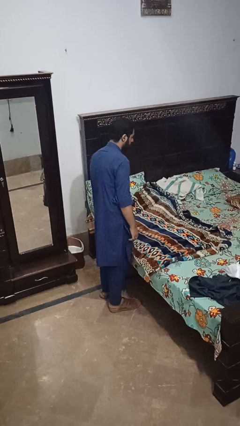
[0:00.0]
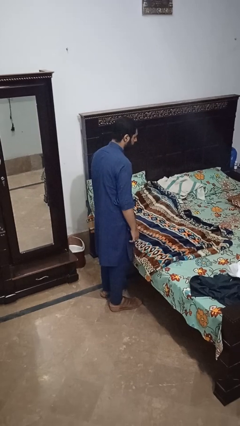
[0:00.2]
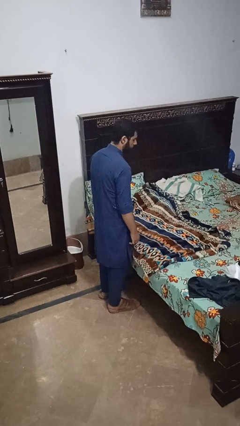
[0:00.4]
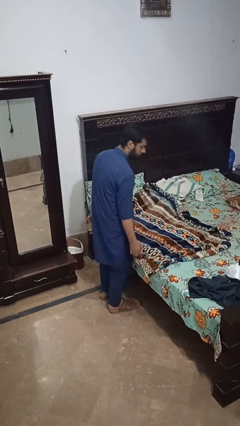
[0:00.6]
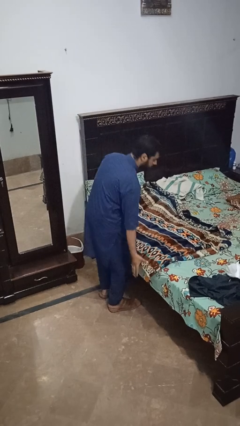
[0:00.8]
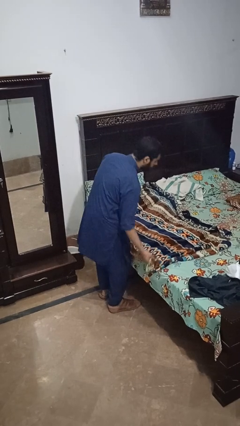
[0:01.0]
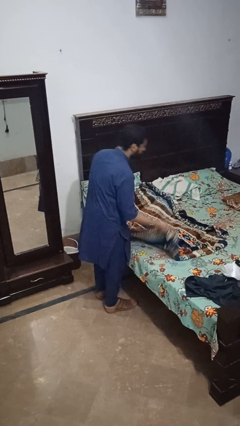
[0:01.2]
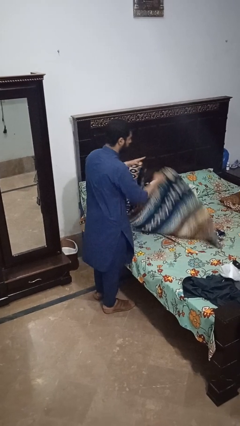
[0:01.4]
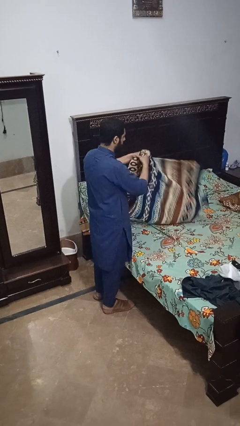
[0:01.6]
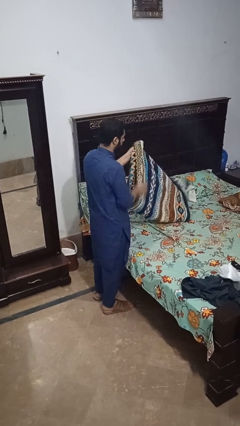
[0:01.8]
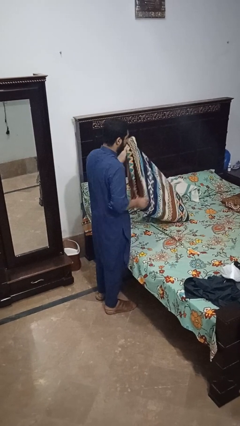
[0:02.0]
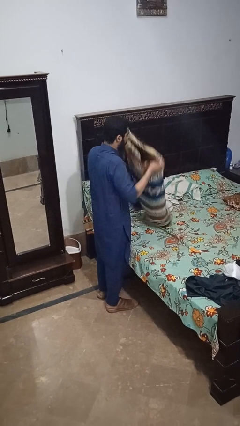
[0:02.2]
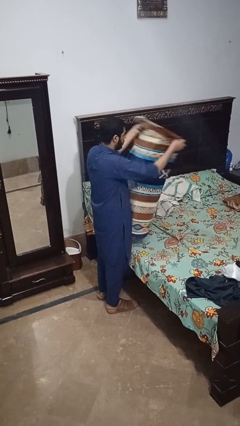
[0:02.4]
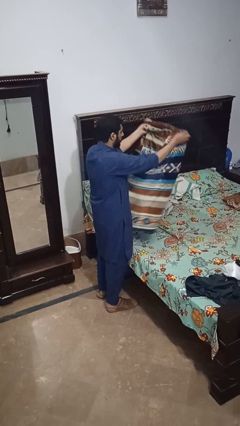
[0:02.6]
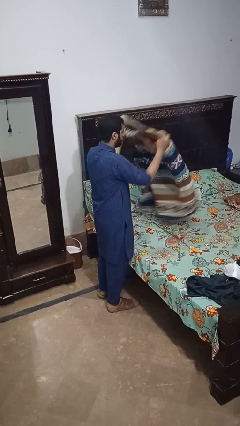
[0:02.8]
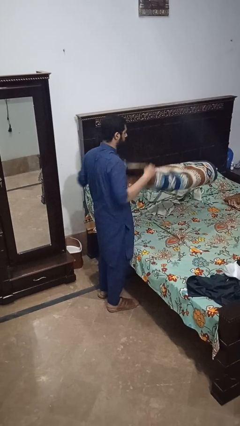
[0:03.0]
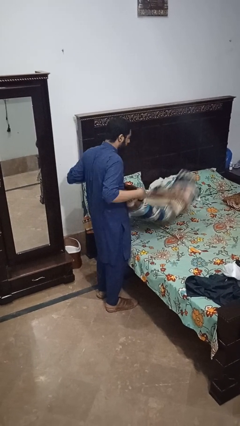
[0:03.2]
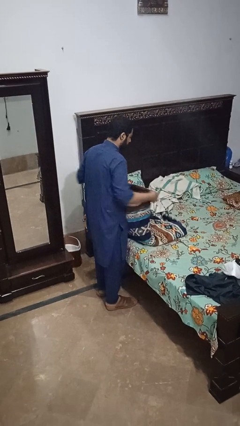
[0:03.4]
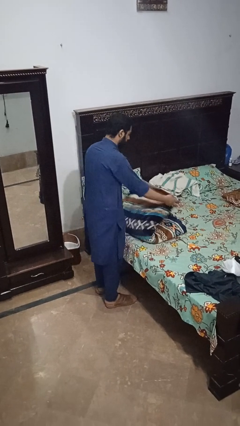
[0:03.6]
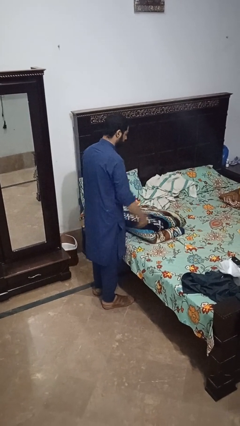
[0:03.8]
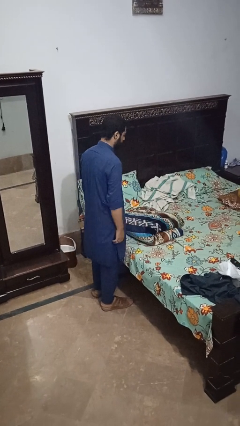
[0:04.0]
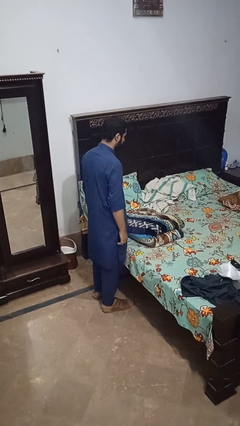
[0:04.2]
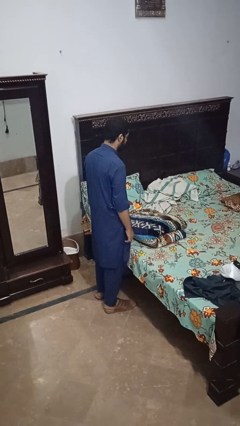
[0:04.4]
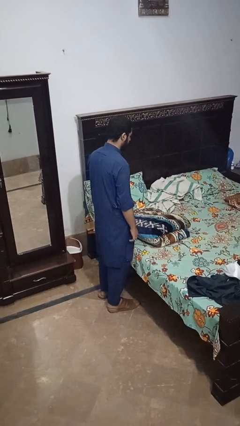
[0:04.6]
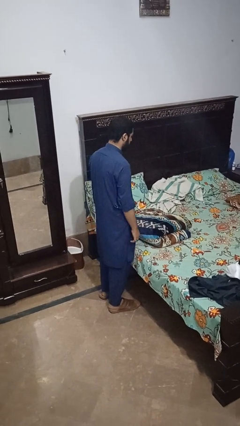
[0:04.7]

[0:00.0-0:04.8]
person folds blanket

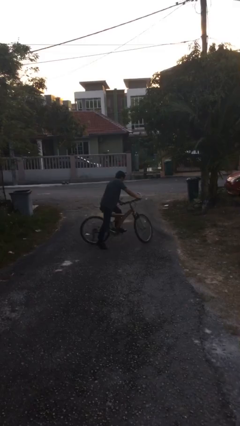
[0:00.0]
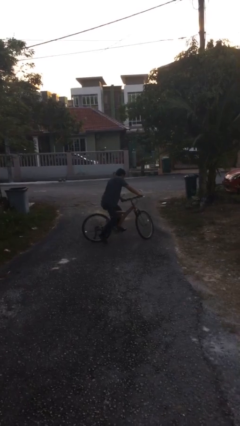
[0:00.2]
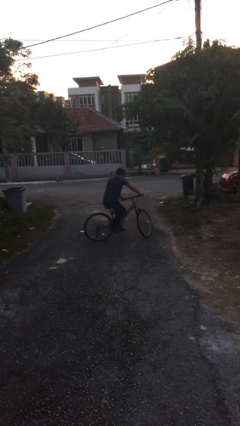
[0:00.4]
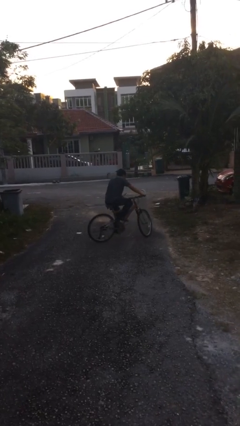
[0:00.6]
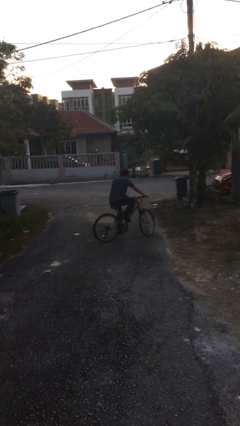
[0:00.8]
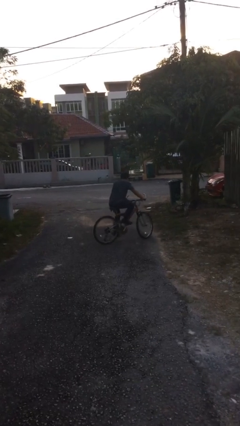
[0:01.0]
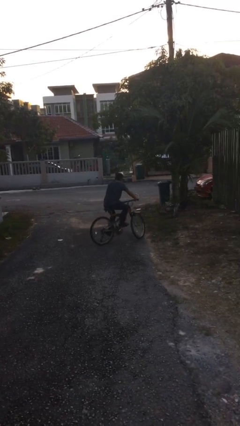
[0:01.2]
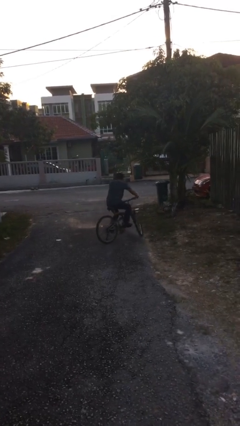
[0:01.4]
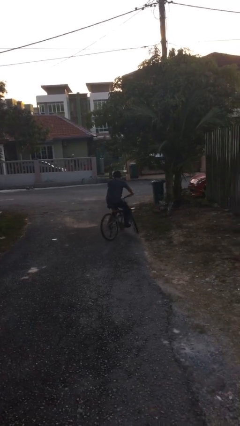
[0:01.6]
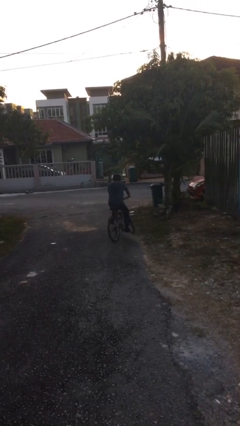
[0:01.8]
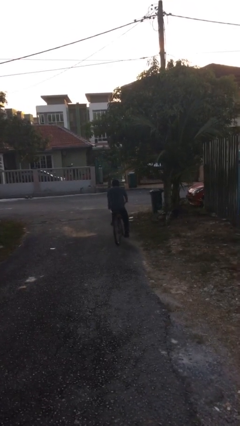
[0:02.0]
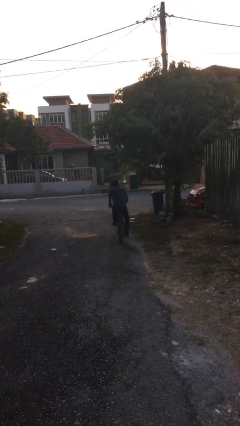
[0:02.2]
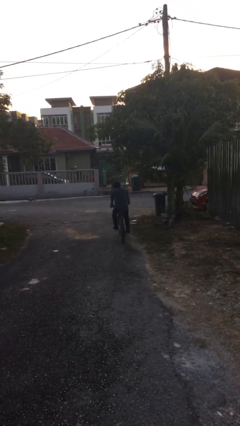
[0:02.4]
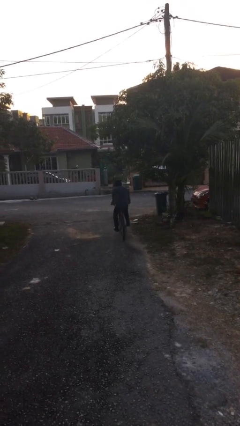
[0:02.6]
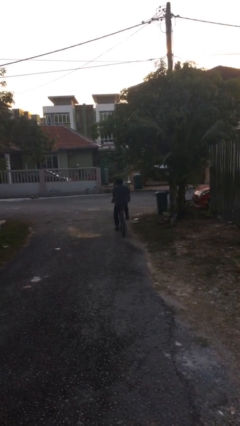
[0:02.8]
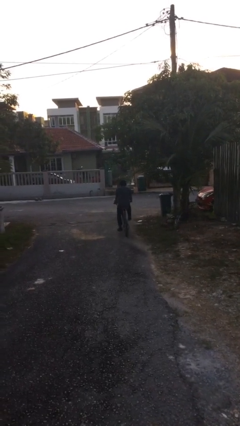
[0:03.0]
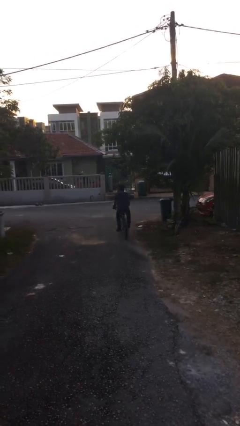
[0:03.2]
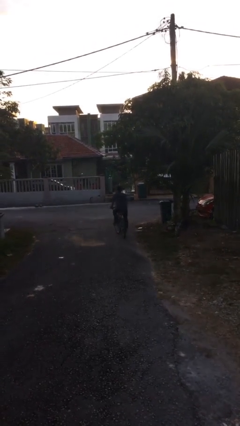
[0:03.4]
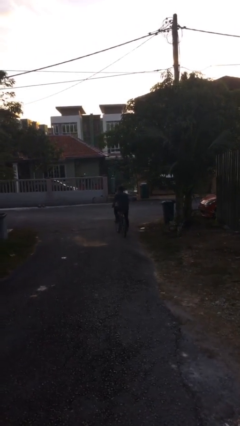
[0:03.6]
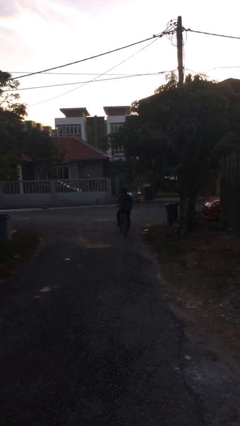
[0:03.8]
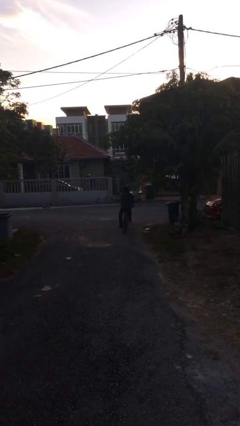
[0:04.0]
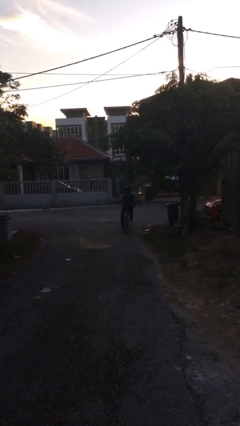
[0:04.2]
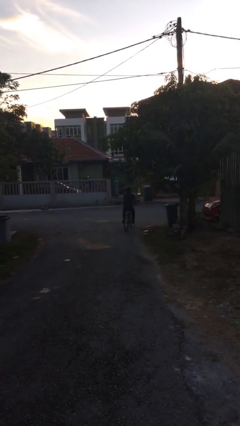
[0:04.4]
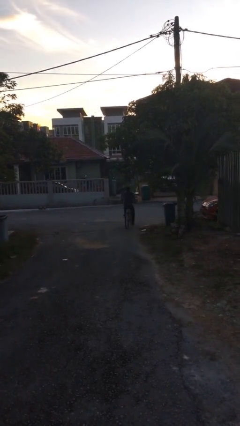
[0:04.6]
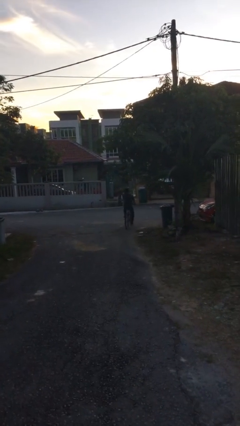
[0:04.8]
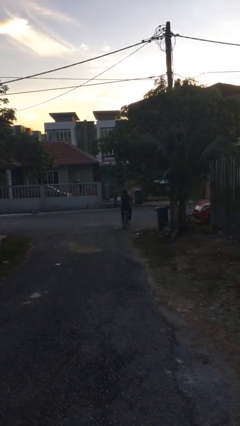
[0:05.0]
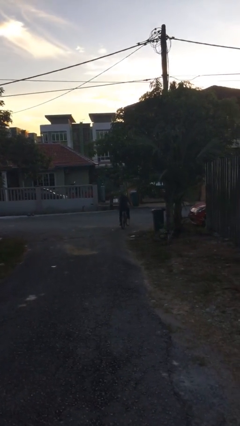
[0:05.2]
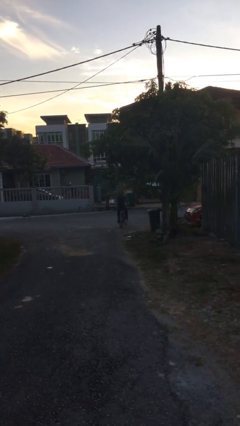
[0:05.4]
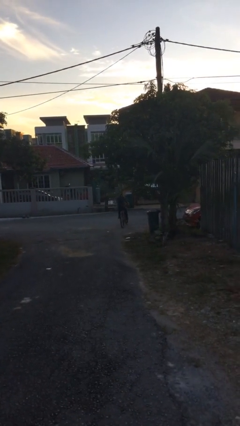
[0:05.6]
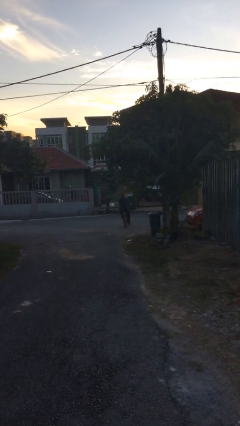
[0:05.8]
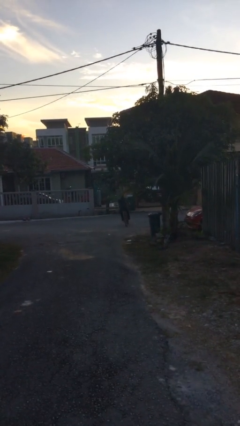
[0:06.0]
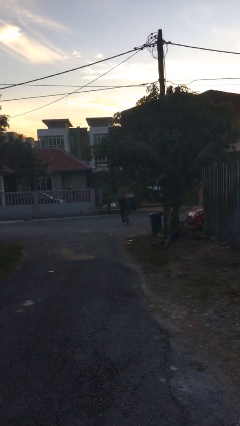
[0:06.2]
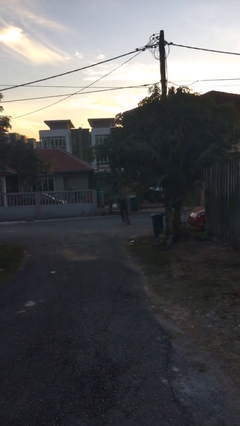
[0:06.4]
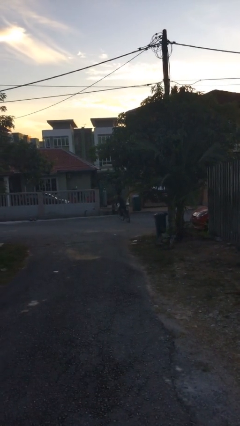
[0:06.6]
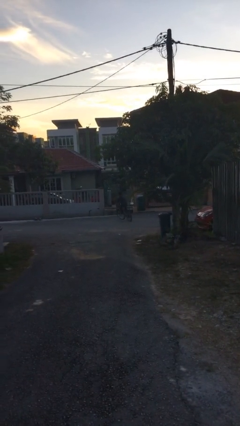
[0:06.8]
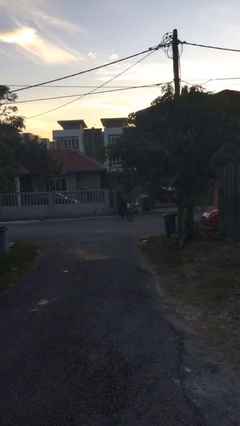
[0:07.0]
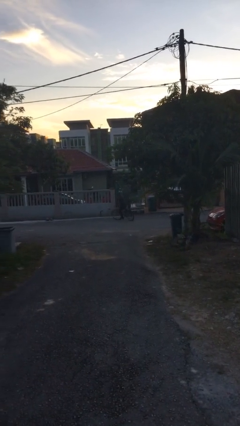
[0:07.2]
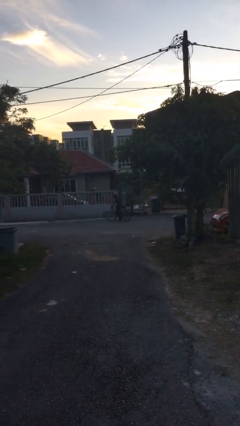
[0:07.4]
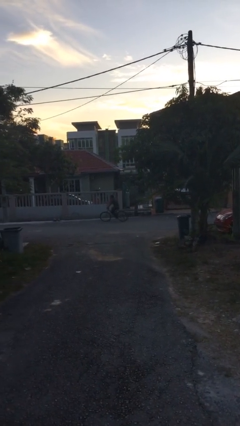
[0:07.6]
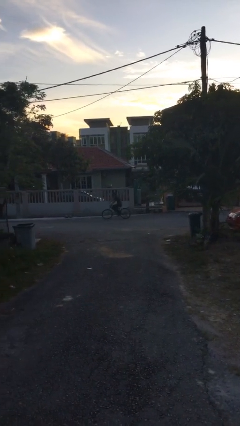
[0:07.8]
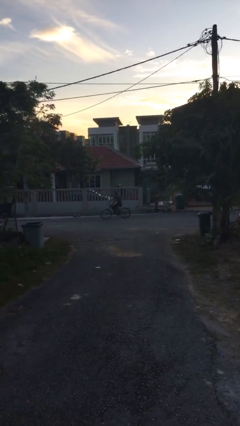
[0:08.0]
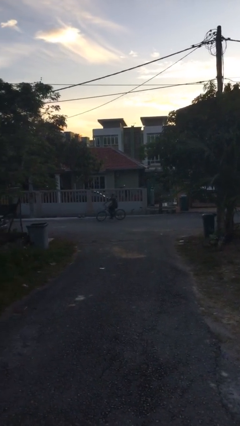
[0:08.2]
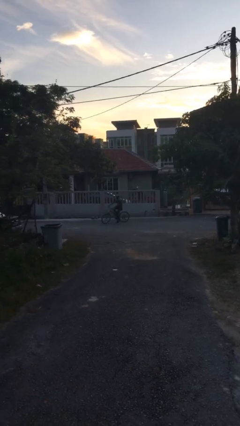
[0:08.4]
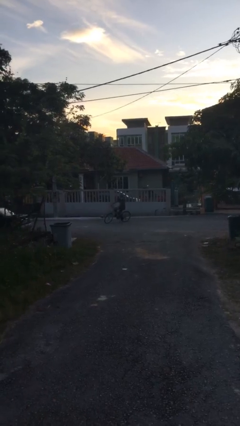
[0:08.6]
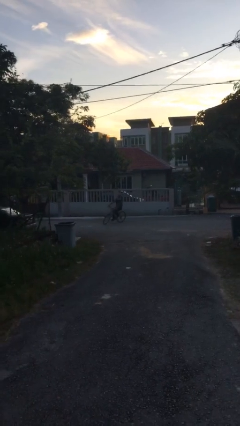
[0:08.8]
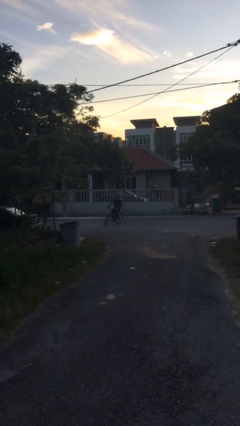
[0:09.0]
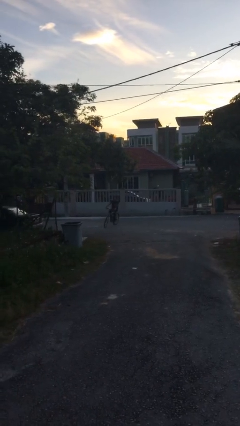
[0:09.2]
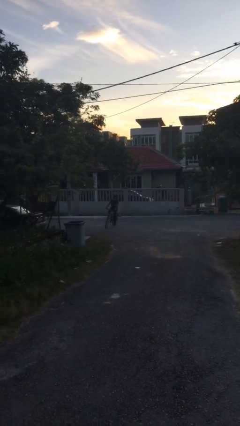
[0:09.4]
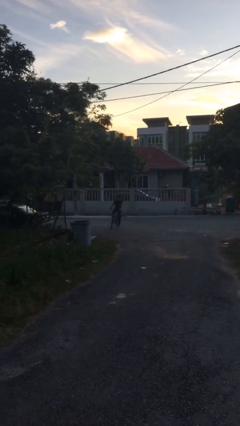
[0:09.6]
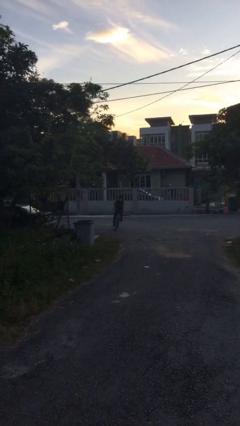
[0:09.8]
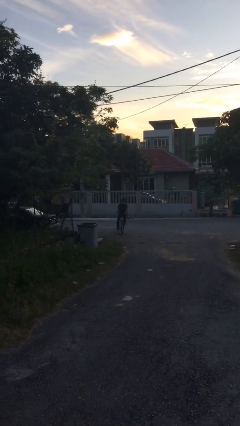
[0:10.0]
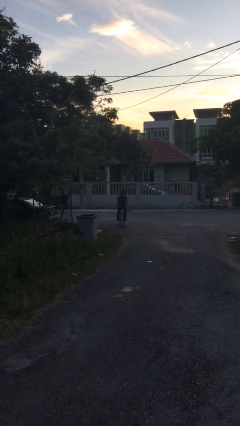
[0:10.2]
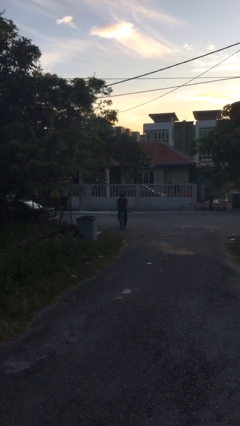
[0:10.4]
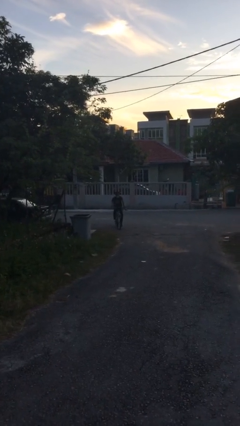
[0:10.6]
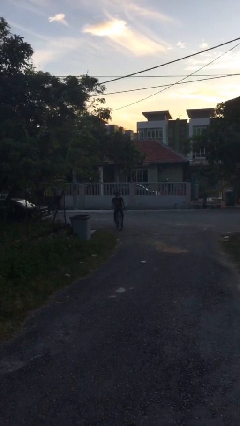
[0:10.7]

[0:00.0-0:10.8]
person rides bicycle

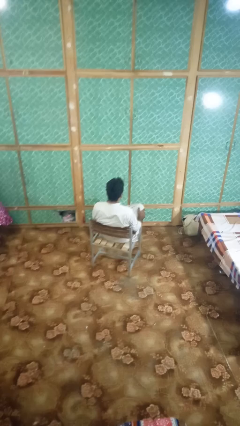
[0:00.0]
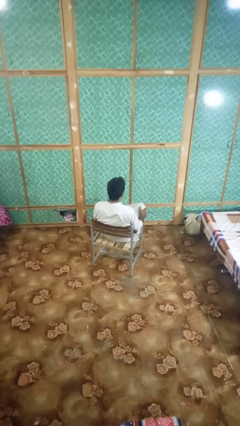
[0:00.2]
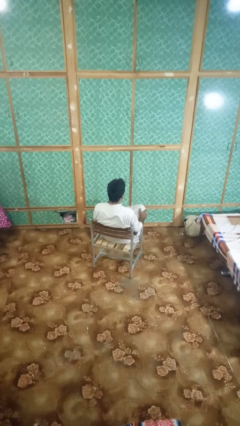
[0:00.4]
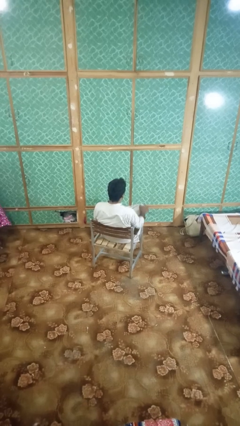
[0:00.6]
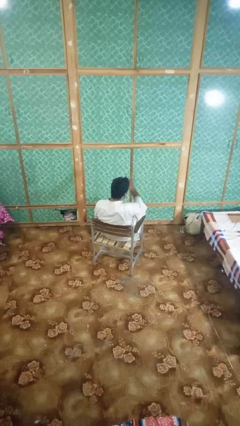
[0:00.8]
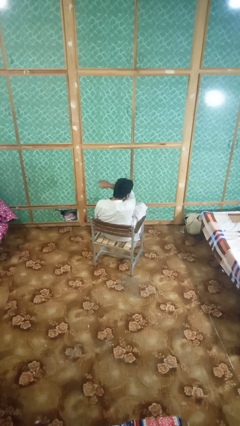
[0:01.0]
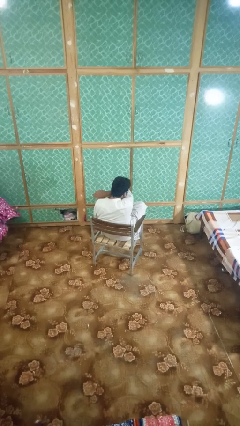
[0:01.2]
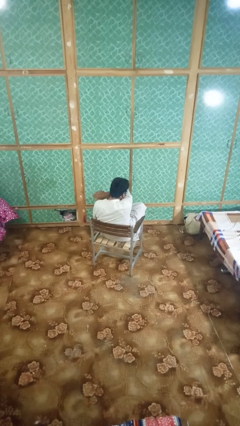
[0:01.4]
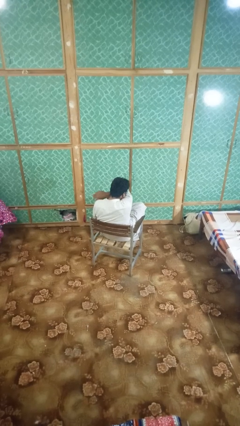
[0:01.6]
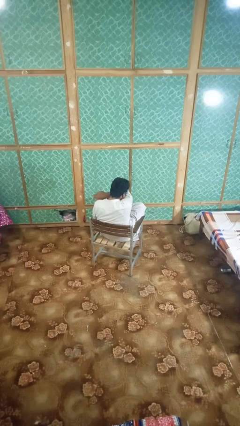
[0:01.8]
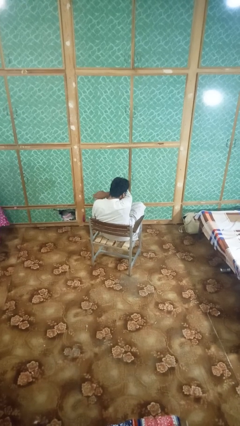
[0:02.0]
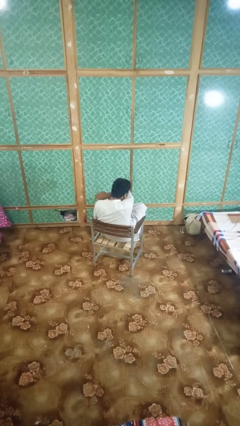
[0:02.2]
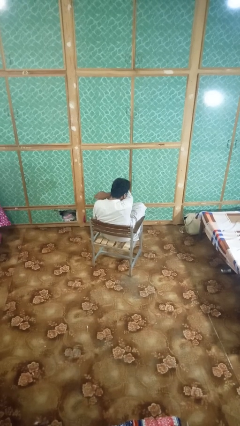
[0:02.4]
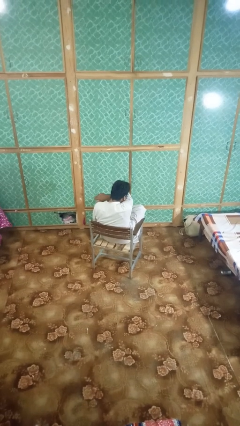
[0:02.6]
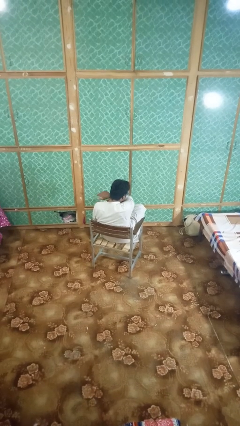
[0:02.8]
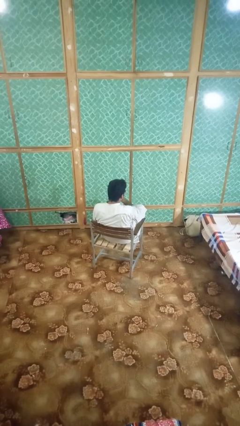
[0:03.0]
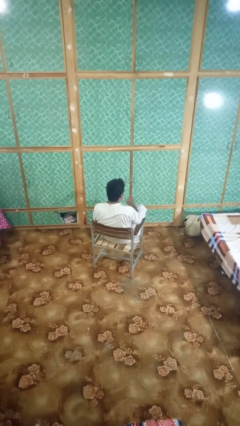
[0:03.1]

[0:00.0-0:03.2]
person sneezes into arm
